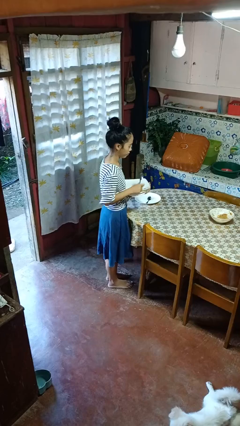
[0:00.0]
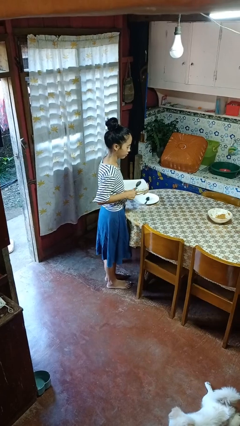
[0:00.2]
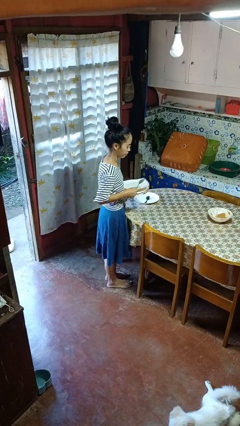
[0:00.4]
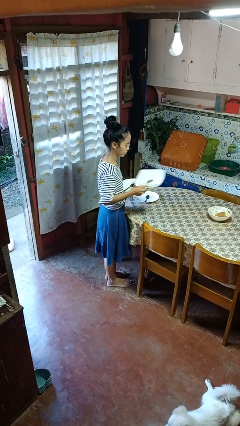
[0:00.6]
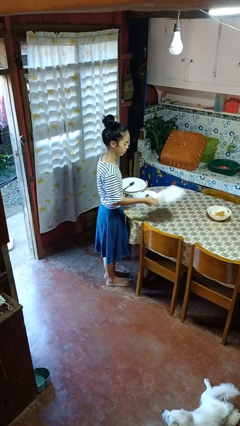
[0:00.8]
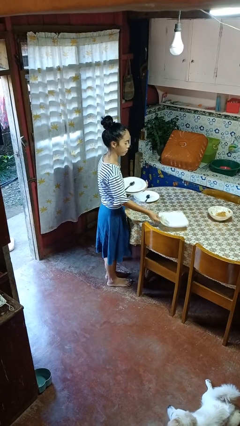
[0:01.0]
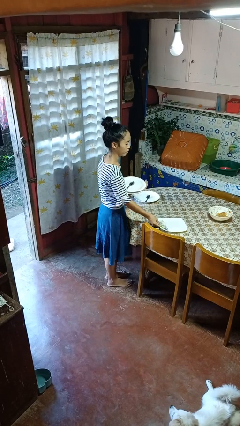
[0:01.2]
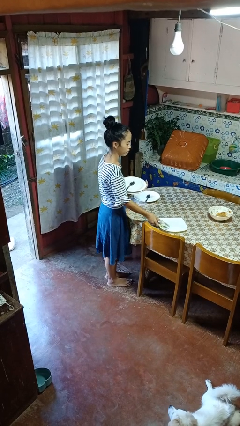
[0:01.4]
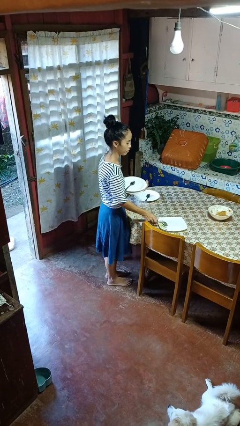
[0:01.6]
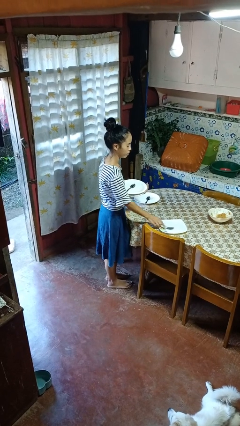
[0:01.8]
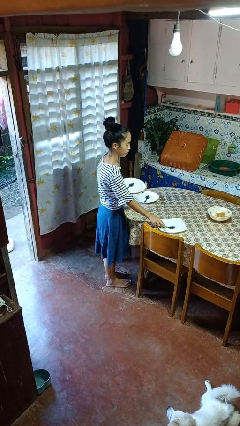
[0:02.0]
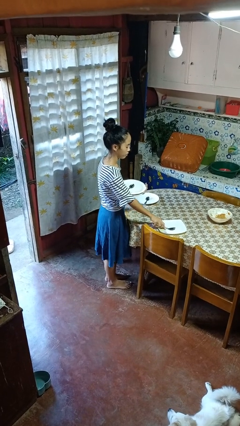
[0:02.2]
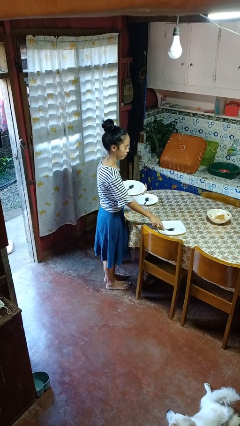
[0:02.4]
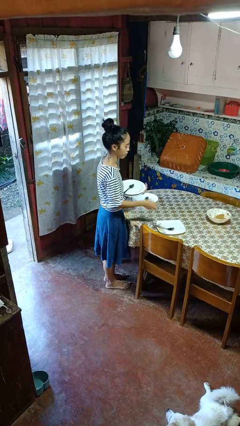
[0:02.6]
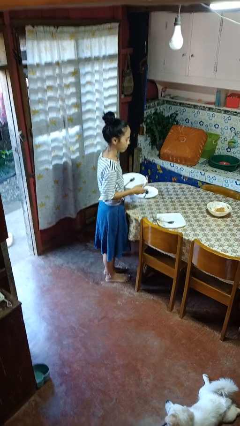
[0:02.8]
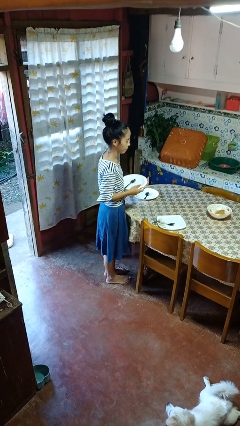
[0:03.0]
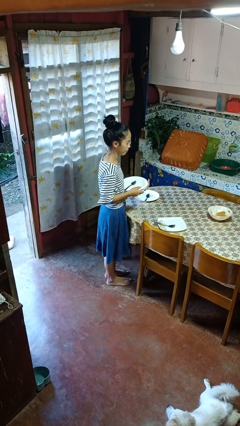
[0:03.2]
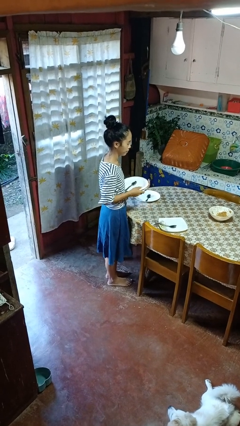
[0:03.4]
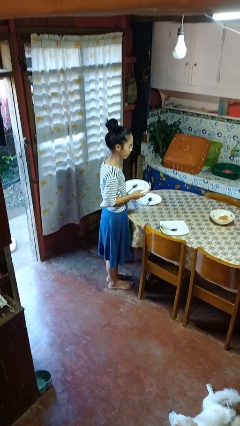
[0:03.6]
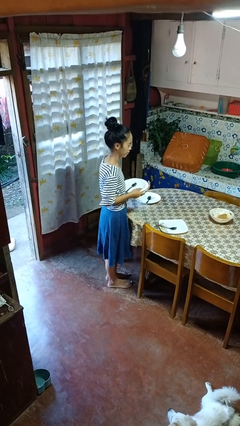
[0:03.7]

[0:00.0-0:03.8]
person sets table

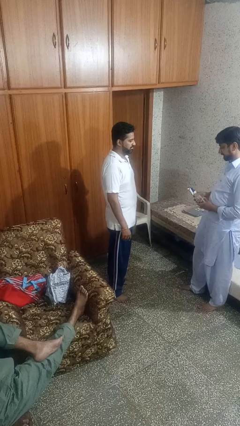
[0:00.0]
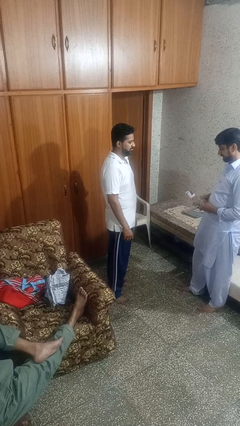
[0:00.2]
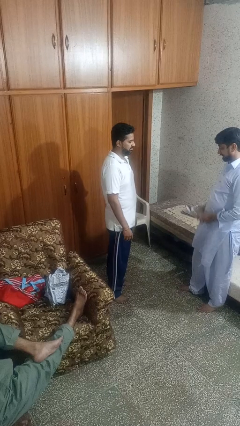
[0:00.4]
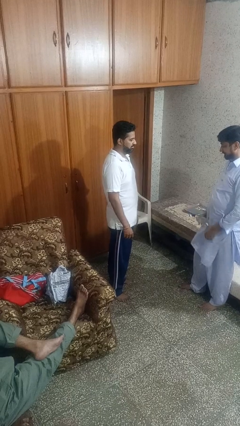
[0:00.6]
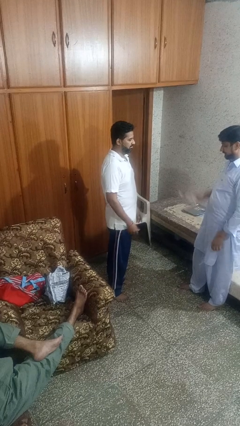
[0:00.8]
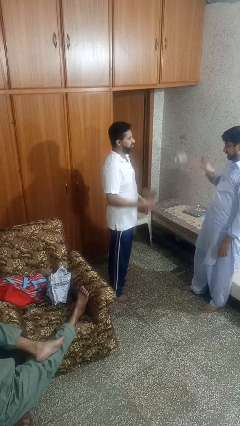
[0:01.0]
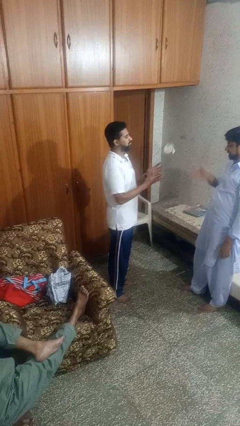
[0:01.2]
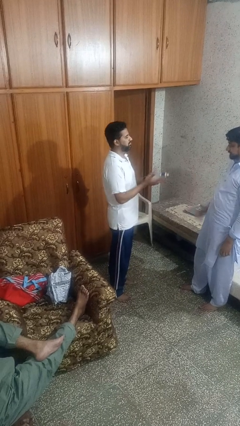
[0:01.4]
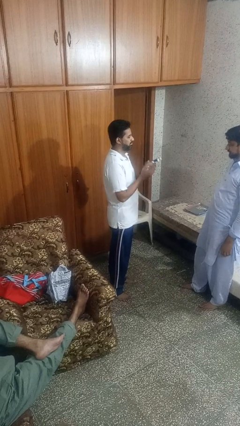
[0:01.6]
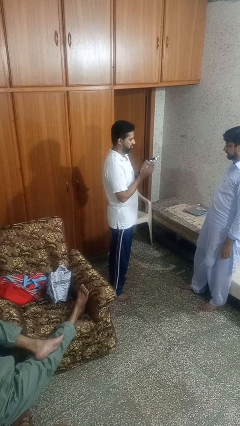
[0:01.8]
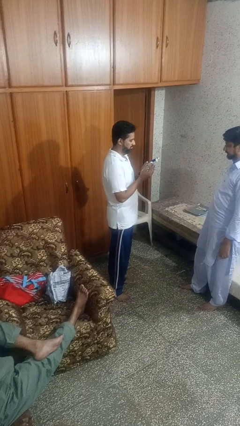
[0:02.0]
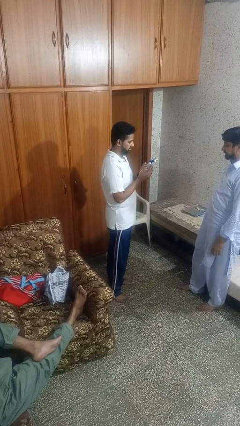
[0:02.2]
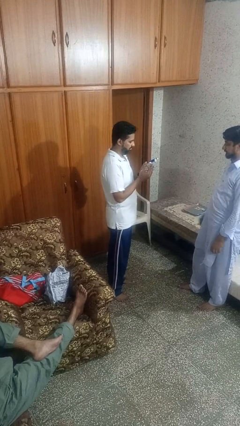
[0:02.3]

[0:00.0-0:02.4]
person catches object from person

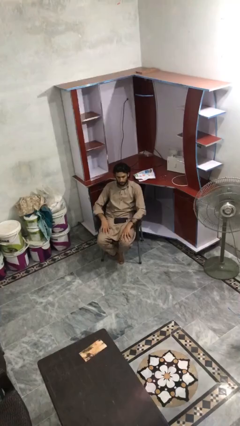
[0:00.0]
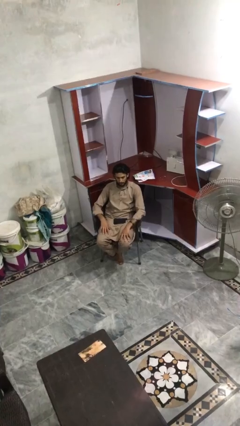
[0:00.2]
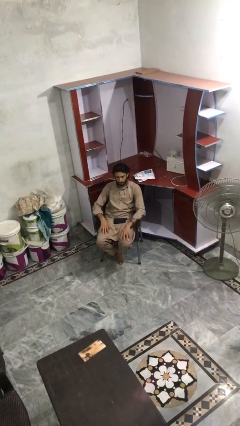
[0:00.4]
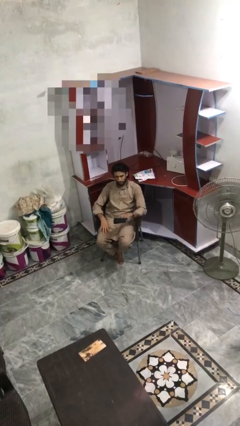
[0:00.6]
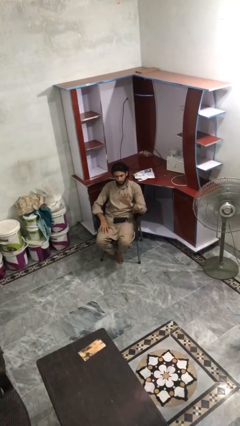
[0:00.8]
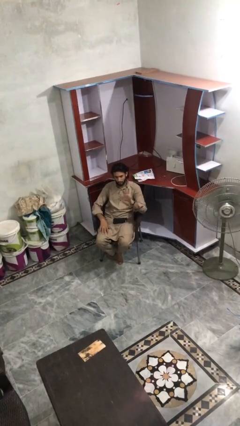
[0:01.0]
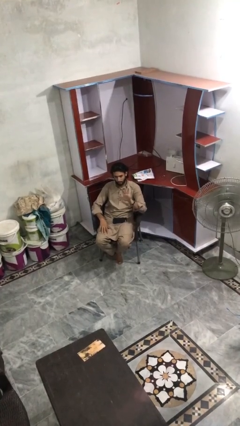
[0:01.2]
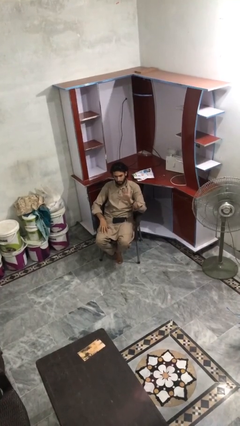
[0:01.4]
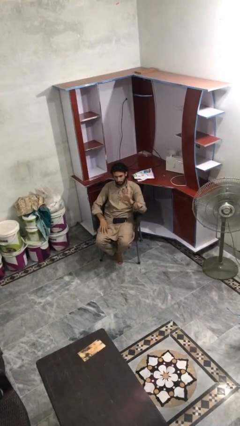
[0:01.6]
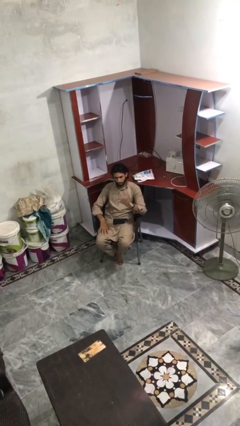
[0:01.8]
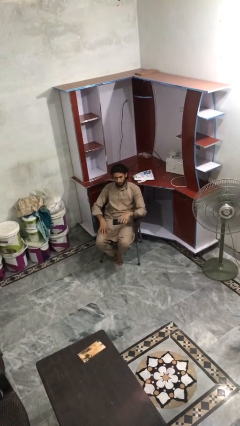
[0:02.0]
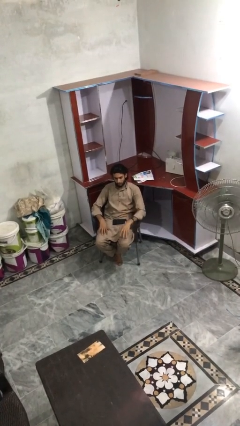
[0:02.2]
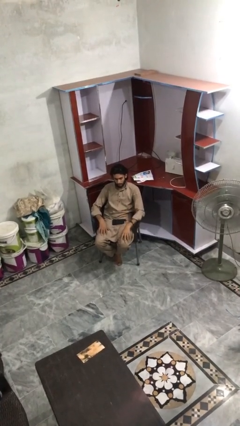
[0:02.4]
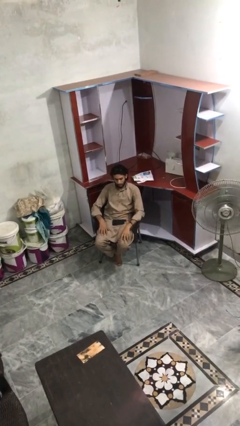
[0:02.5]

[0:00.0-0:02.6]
person gestures number five

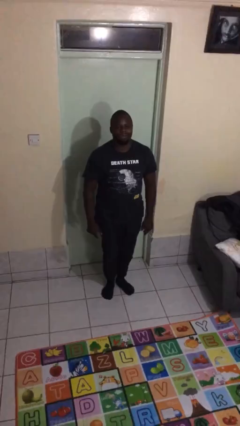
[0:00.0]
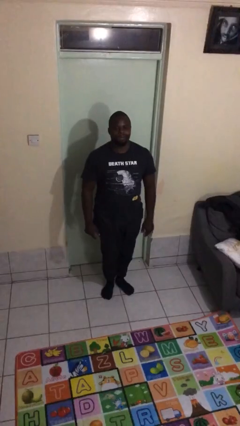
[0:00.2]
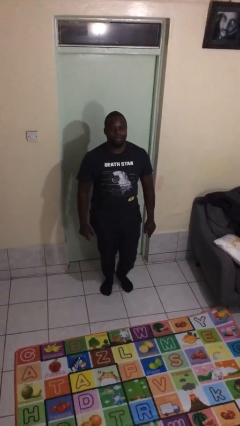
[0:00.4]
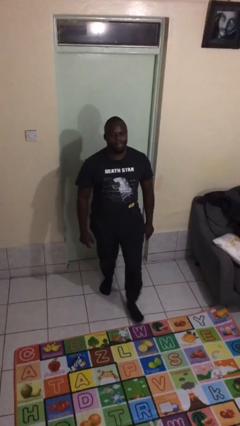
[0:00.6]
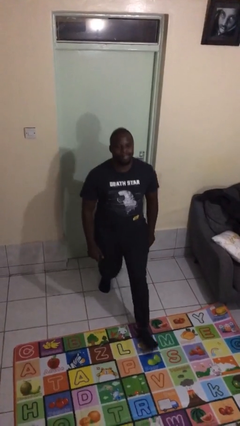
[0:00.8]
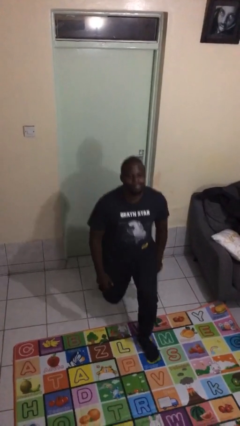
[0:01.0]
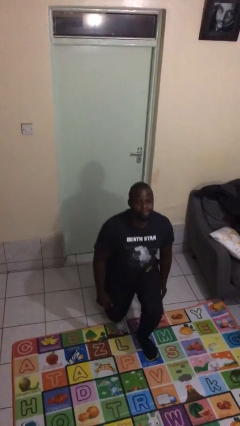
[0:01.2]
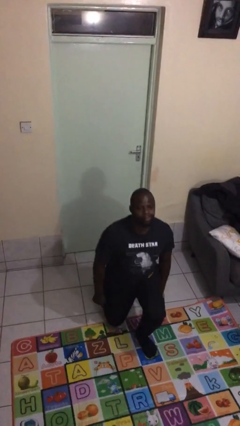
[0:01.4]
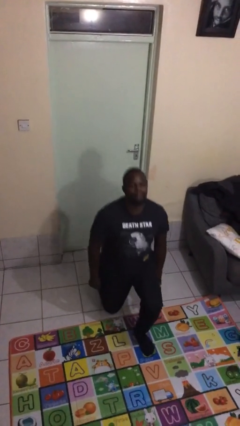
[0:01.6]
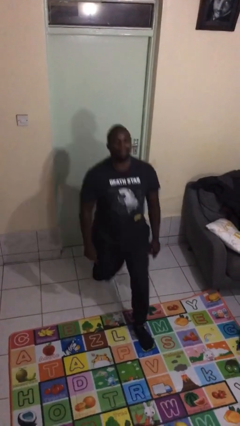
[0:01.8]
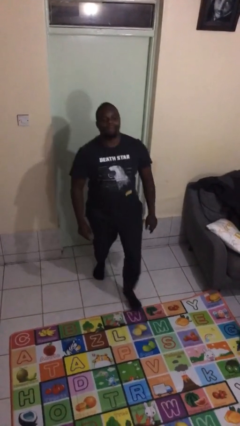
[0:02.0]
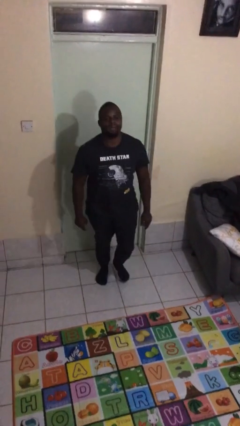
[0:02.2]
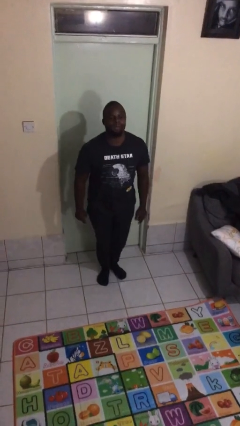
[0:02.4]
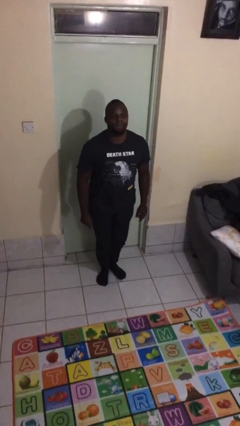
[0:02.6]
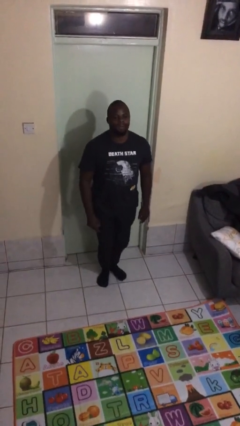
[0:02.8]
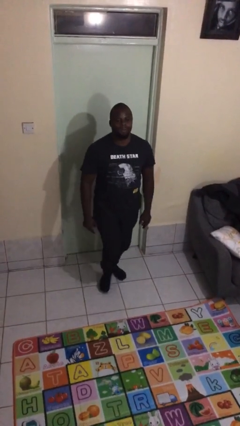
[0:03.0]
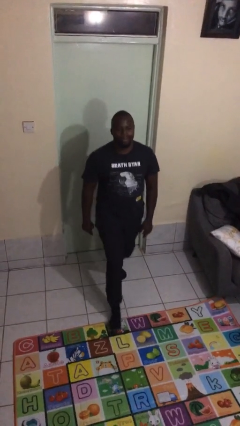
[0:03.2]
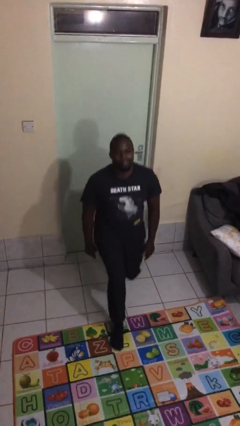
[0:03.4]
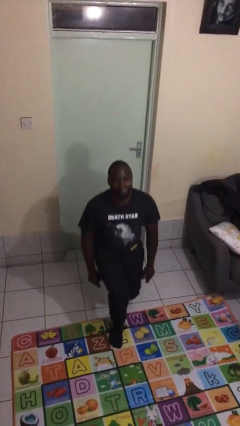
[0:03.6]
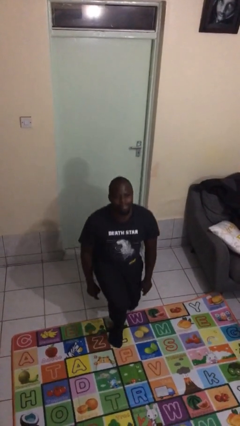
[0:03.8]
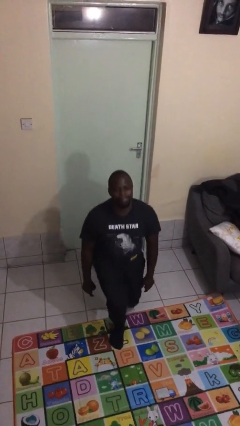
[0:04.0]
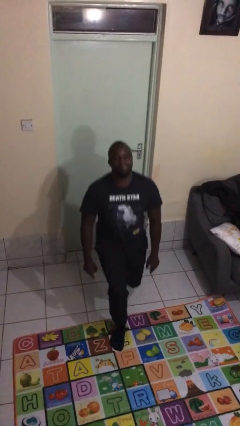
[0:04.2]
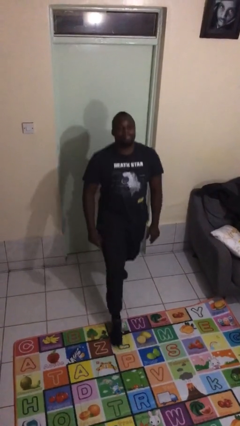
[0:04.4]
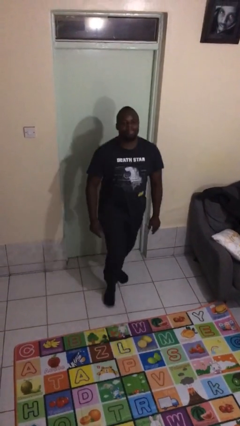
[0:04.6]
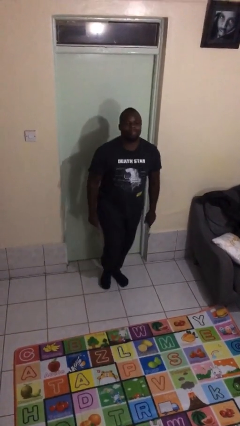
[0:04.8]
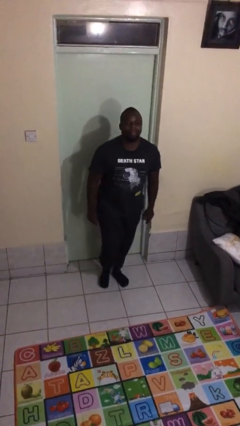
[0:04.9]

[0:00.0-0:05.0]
person exercises with lunges

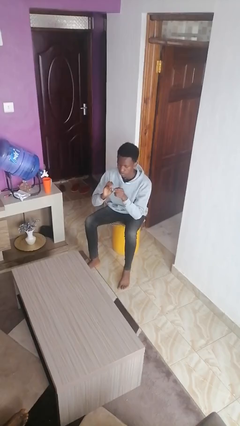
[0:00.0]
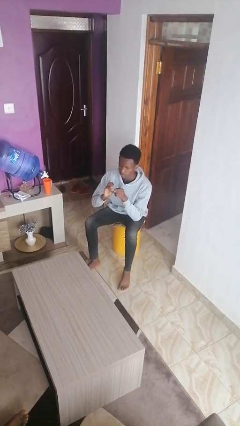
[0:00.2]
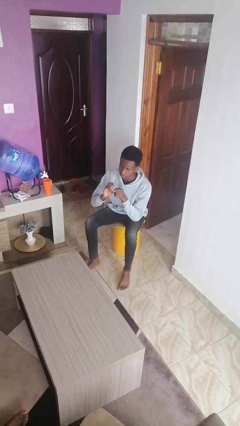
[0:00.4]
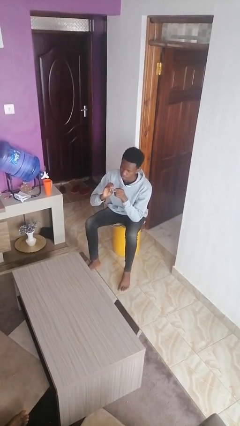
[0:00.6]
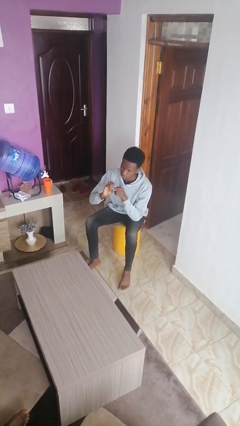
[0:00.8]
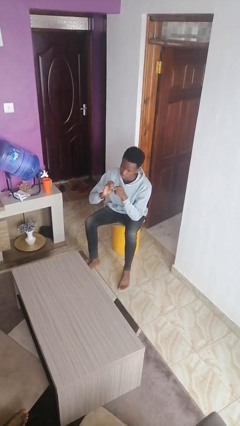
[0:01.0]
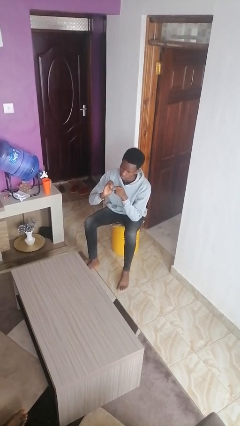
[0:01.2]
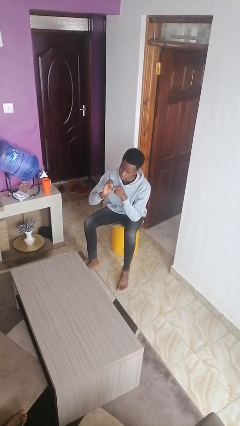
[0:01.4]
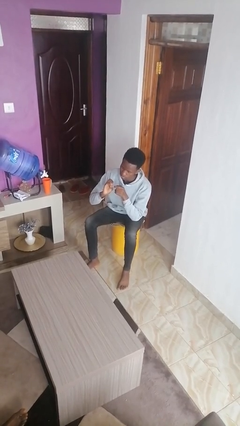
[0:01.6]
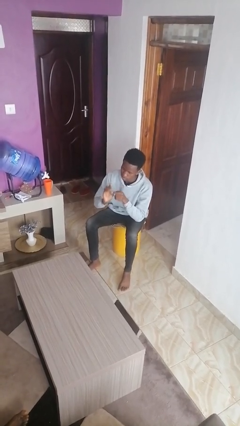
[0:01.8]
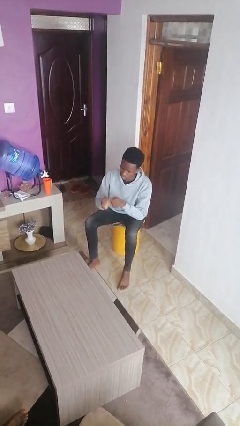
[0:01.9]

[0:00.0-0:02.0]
person files fingernails

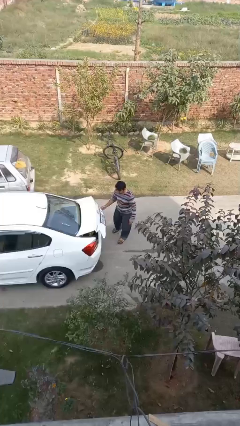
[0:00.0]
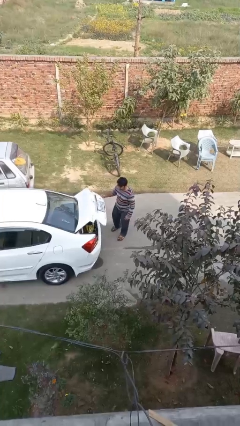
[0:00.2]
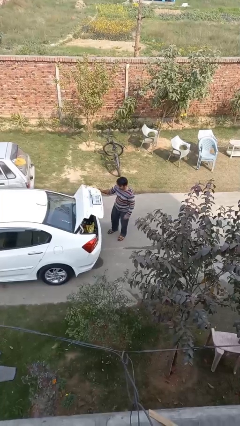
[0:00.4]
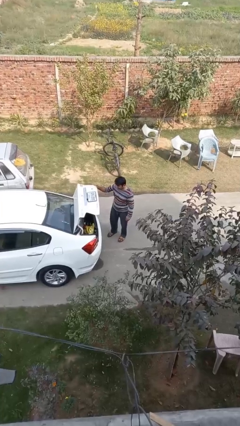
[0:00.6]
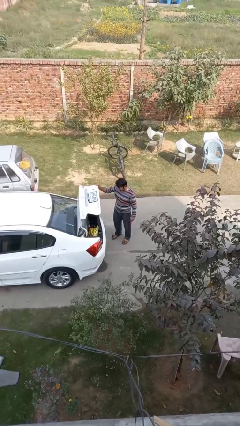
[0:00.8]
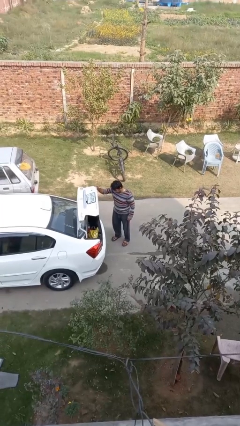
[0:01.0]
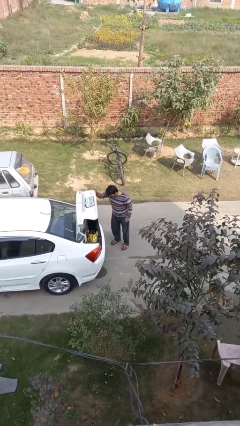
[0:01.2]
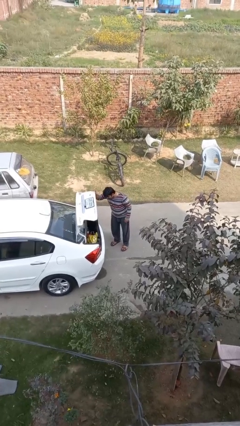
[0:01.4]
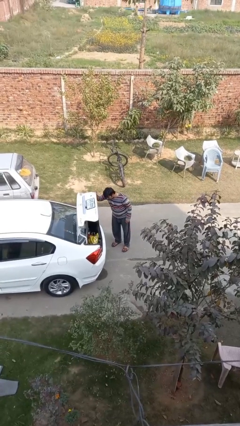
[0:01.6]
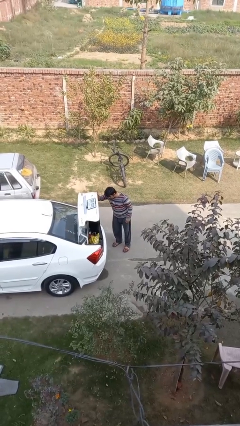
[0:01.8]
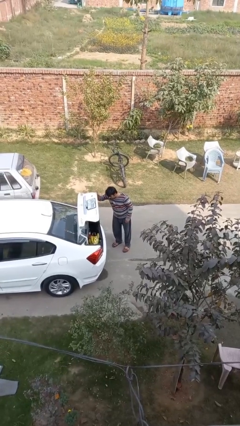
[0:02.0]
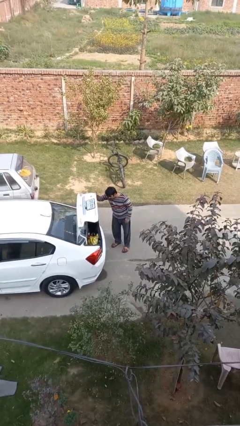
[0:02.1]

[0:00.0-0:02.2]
person opens car trunk
